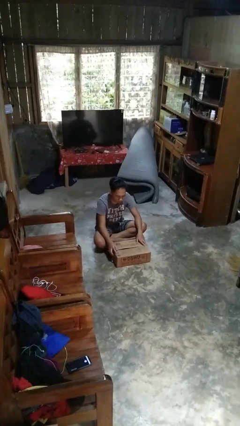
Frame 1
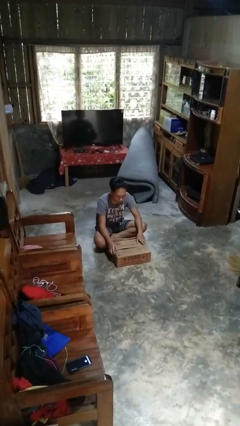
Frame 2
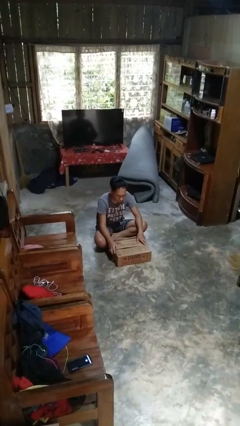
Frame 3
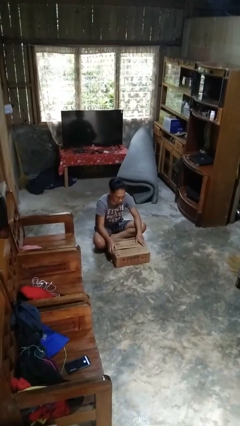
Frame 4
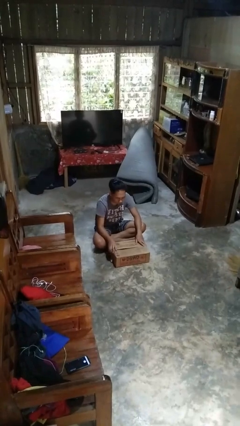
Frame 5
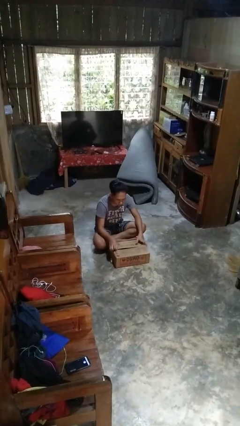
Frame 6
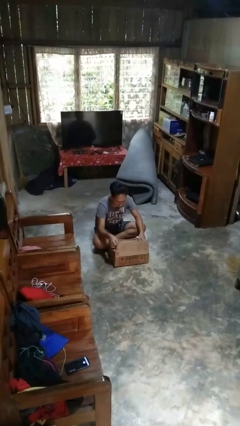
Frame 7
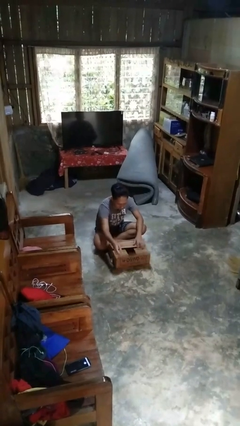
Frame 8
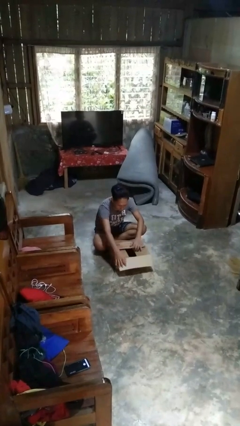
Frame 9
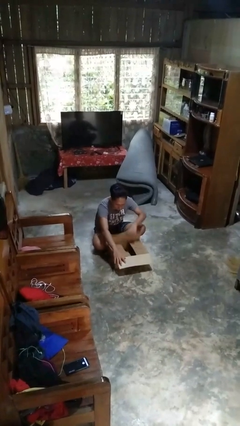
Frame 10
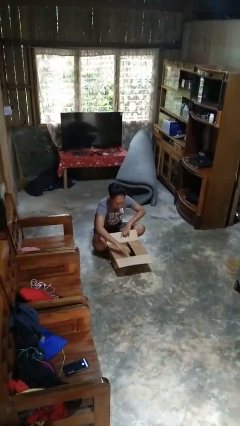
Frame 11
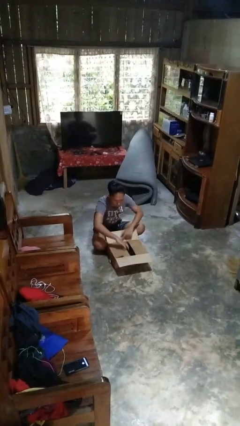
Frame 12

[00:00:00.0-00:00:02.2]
person opens box

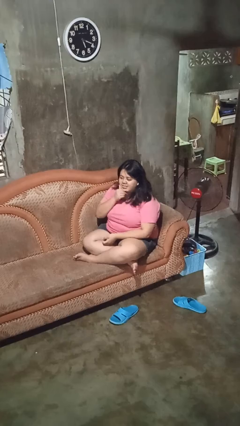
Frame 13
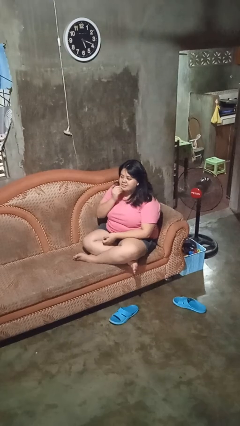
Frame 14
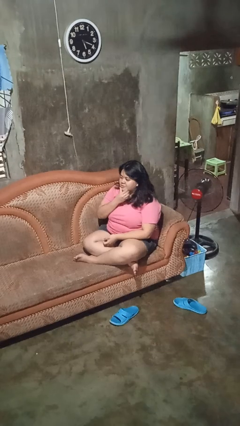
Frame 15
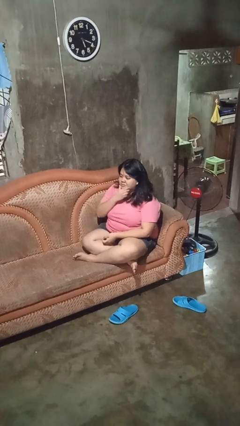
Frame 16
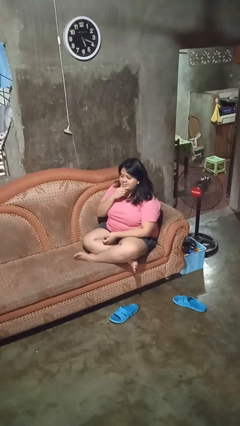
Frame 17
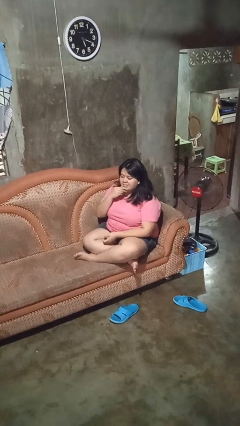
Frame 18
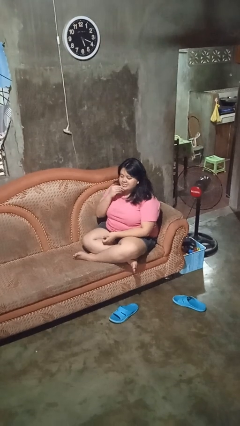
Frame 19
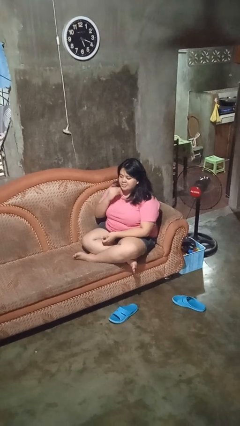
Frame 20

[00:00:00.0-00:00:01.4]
person strokes chin

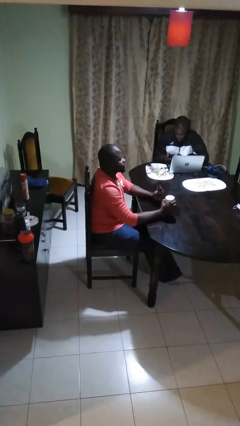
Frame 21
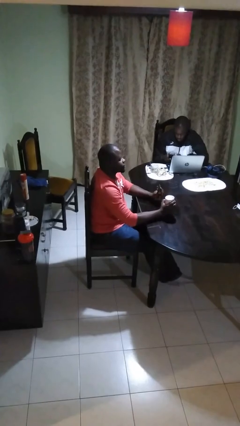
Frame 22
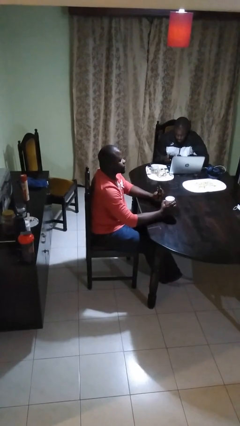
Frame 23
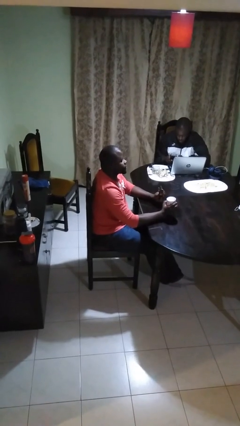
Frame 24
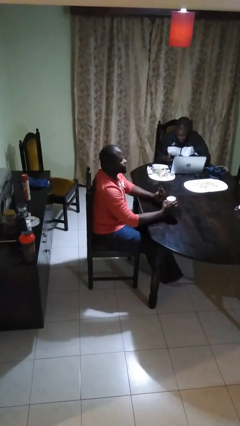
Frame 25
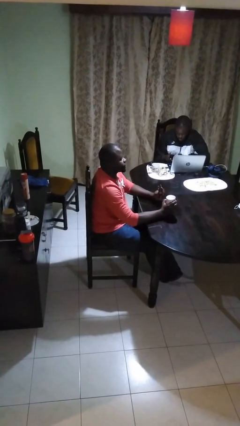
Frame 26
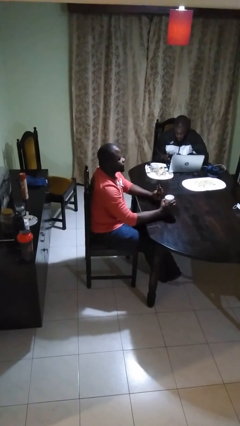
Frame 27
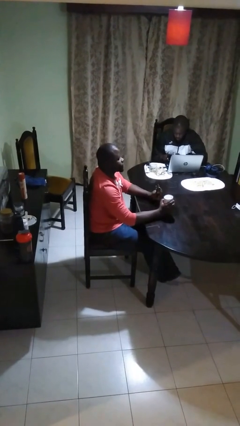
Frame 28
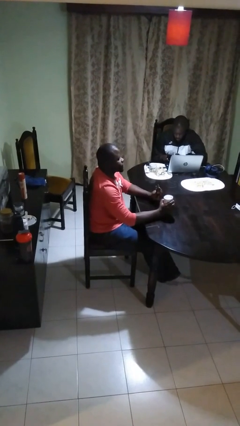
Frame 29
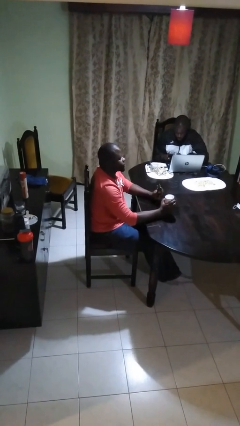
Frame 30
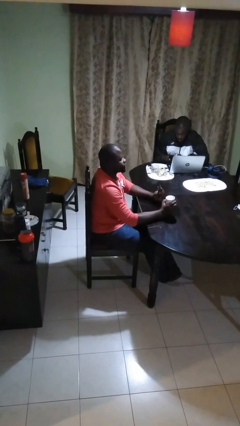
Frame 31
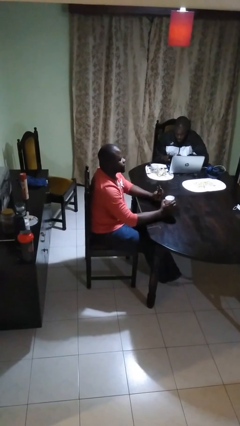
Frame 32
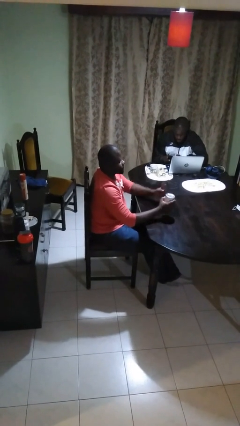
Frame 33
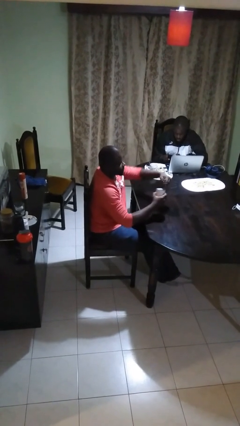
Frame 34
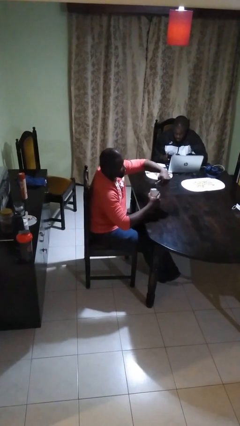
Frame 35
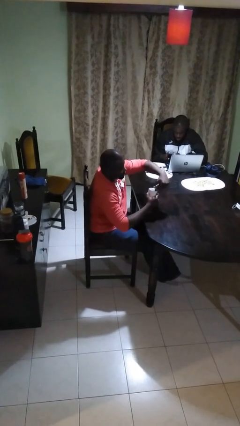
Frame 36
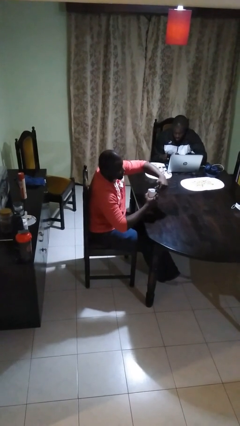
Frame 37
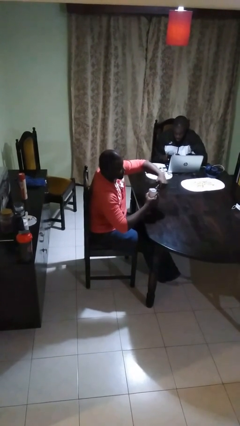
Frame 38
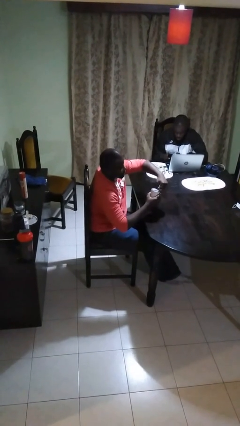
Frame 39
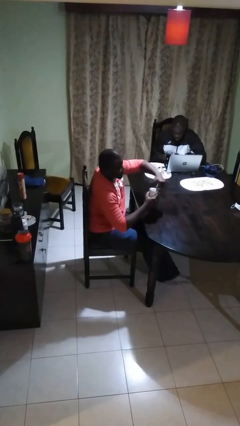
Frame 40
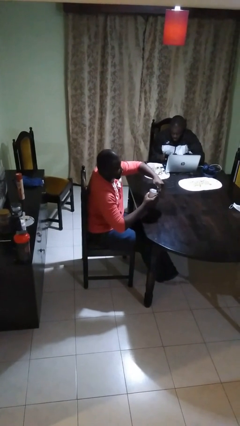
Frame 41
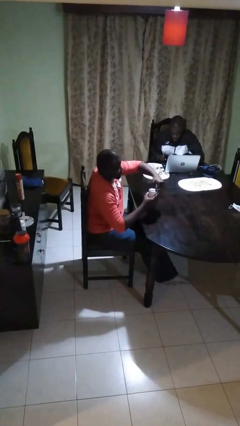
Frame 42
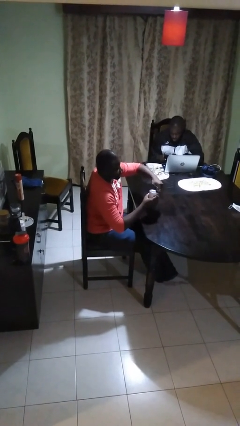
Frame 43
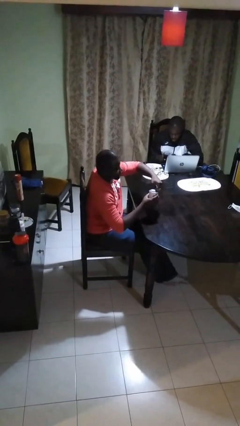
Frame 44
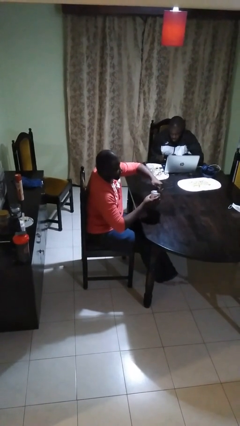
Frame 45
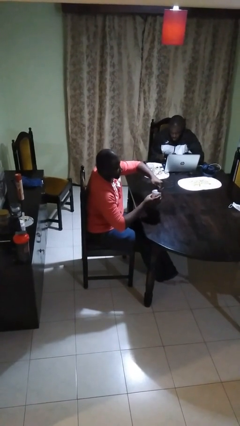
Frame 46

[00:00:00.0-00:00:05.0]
person opens can with can opener

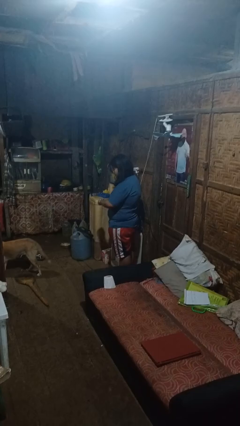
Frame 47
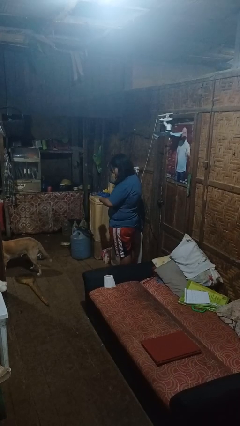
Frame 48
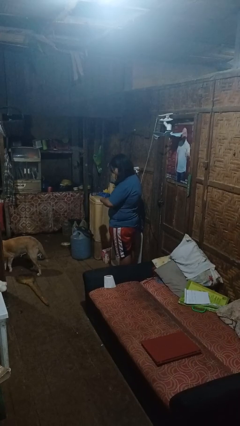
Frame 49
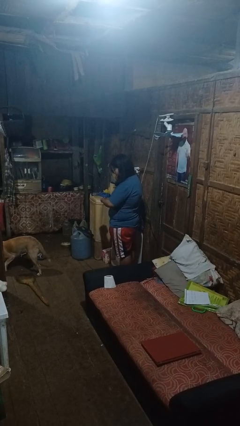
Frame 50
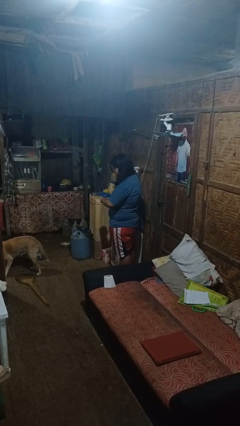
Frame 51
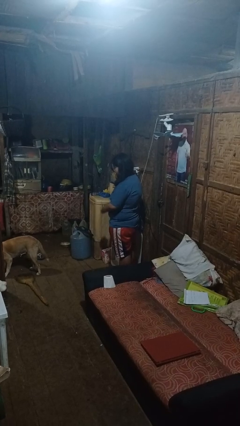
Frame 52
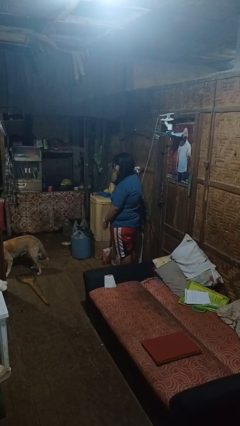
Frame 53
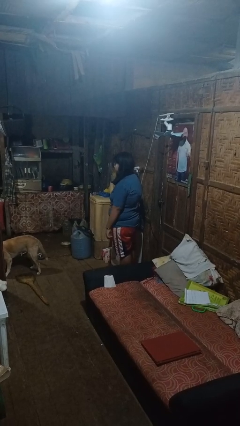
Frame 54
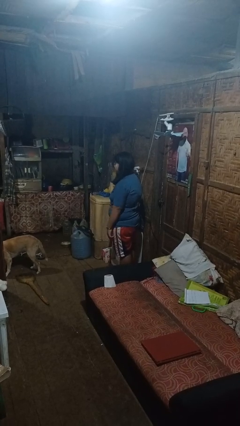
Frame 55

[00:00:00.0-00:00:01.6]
person looks at wristwatch

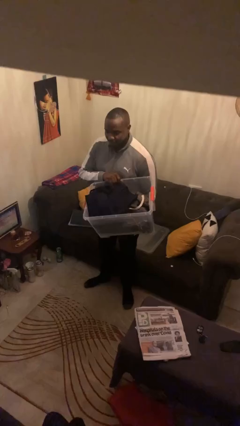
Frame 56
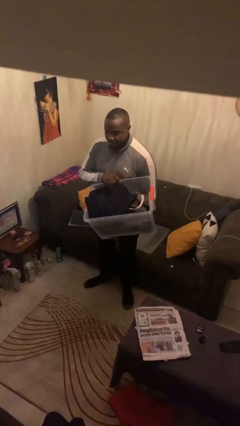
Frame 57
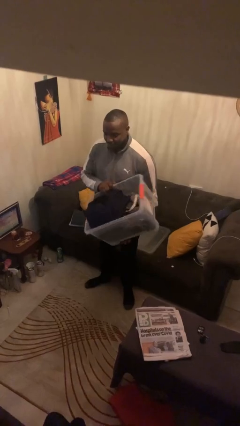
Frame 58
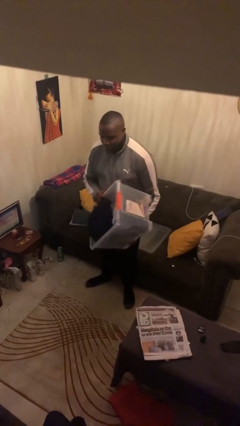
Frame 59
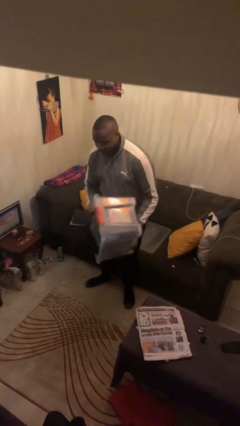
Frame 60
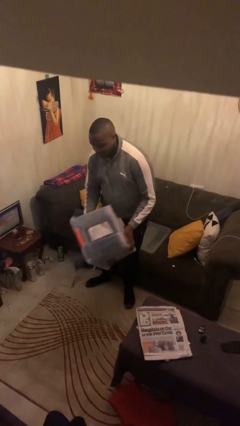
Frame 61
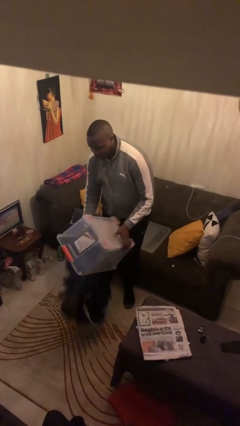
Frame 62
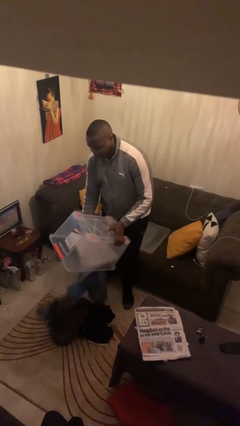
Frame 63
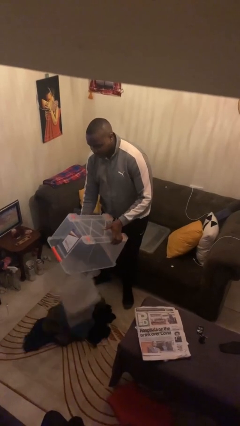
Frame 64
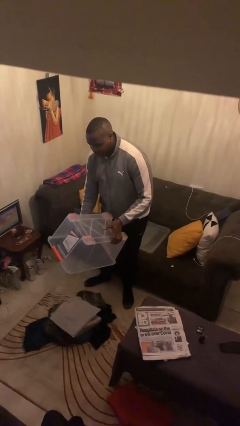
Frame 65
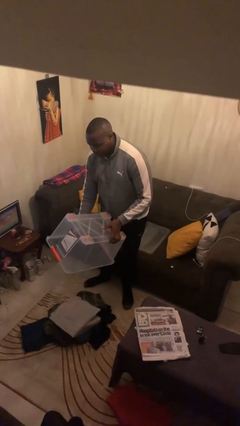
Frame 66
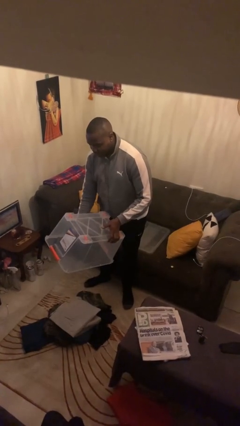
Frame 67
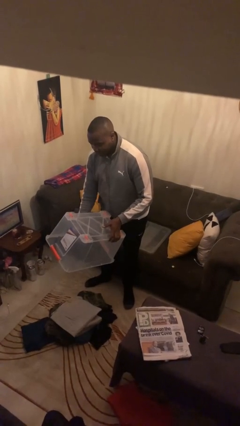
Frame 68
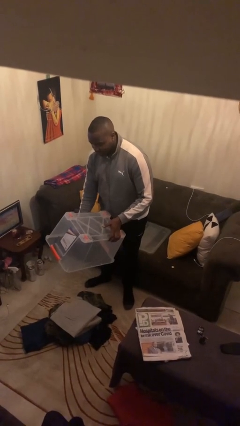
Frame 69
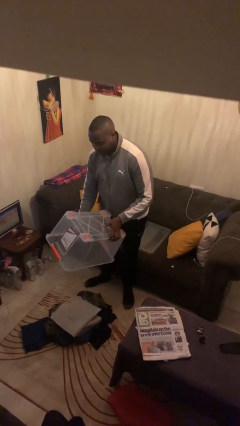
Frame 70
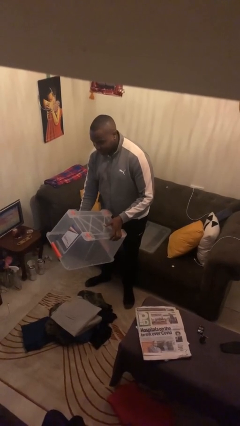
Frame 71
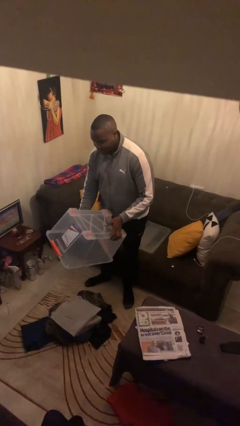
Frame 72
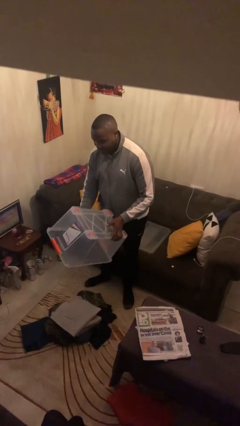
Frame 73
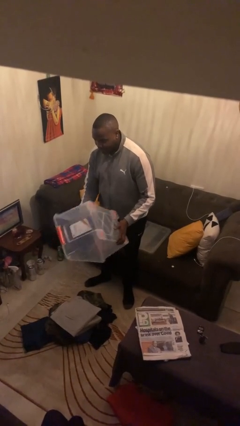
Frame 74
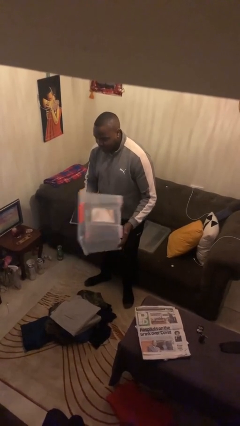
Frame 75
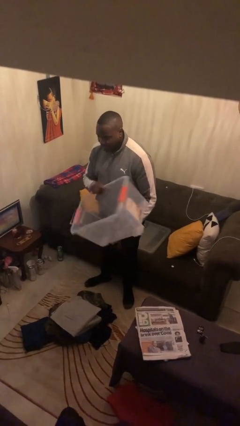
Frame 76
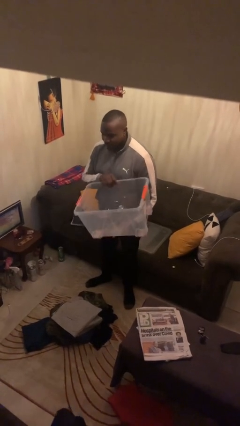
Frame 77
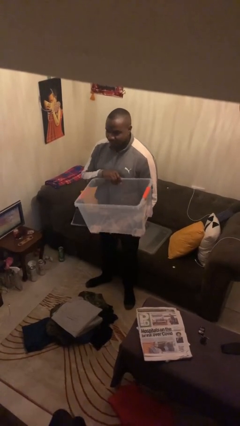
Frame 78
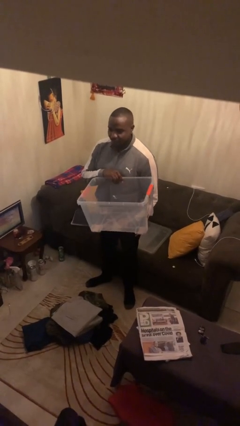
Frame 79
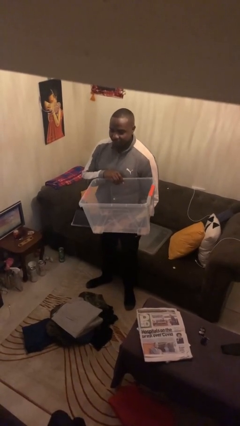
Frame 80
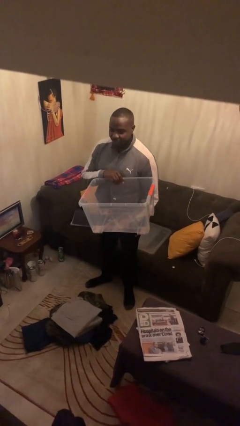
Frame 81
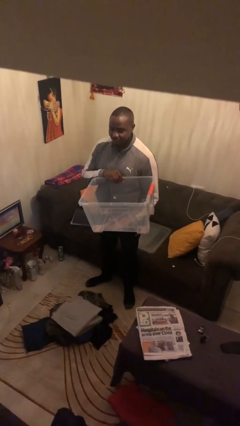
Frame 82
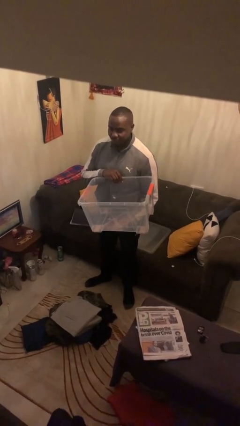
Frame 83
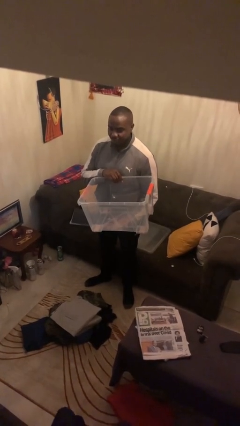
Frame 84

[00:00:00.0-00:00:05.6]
person unloads box onto floor

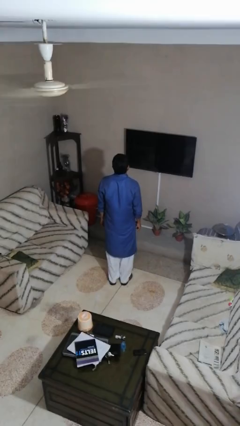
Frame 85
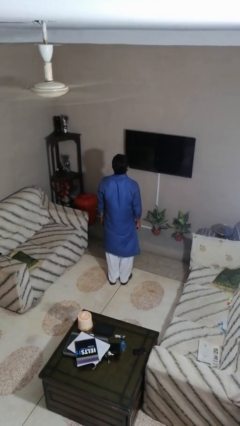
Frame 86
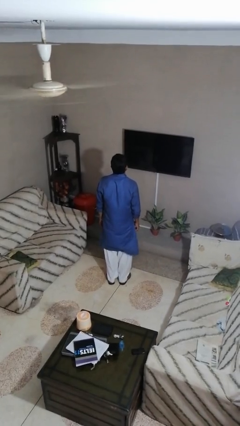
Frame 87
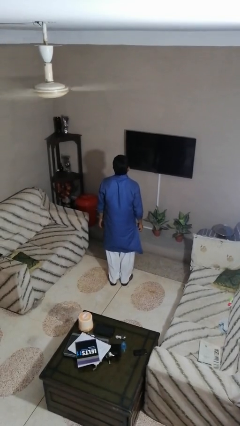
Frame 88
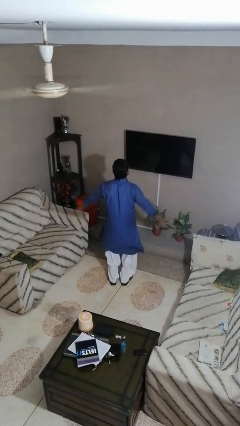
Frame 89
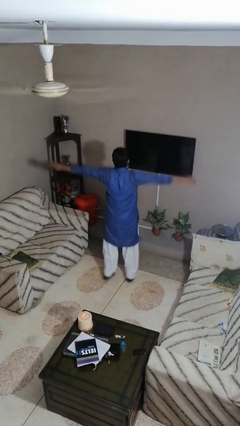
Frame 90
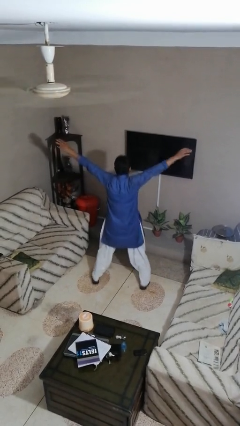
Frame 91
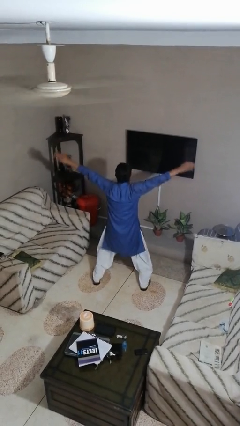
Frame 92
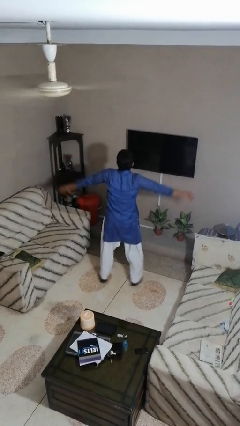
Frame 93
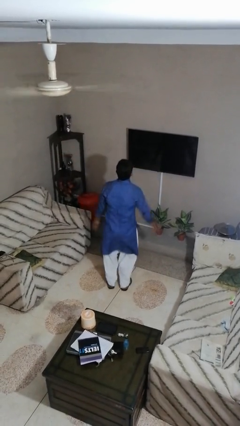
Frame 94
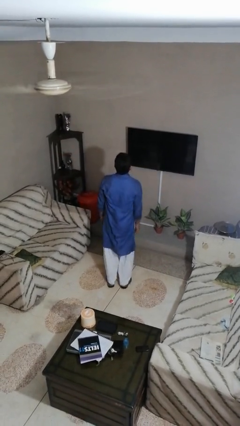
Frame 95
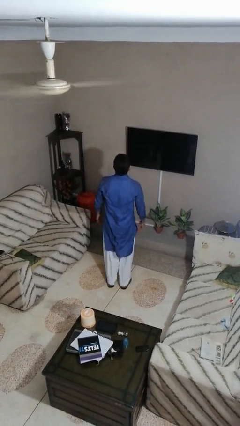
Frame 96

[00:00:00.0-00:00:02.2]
person exercises with jumping jacks
